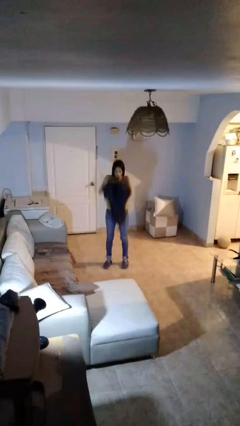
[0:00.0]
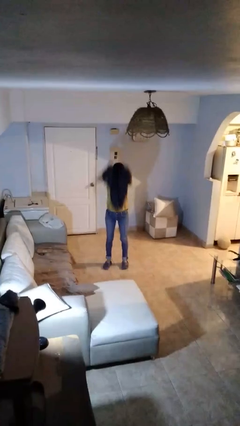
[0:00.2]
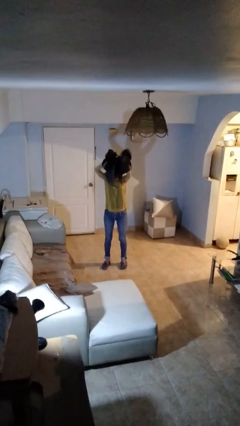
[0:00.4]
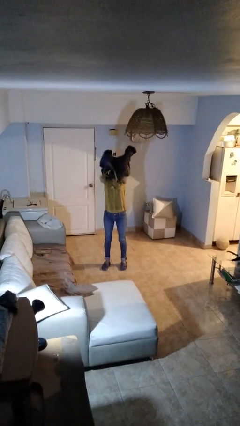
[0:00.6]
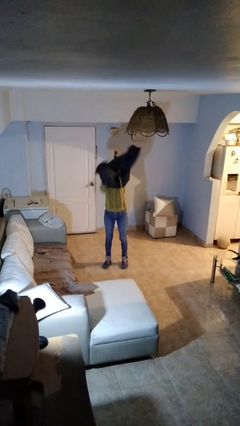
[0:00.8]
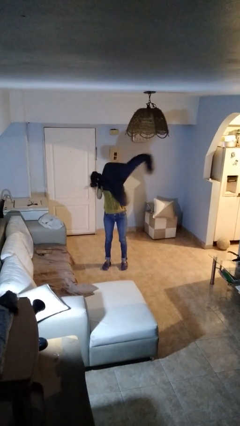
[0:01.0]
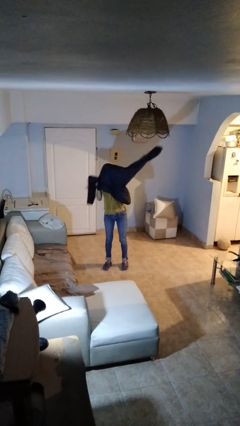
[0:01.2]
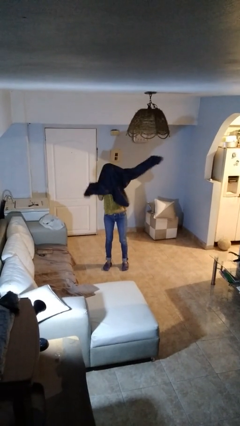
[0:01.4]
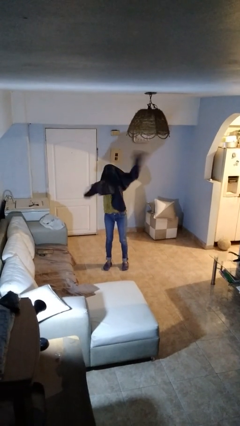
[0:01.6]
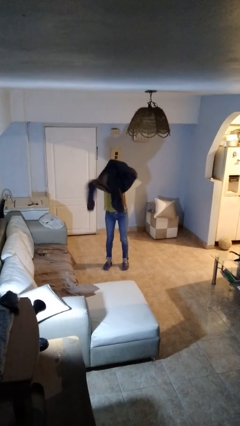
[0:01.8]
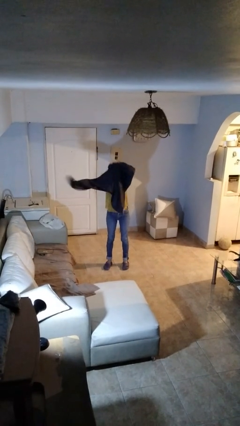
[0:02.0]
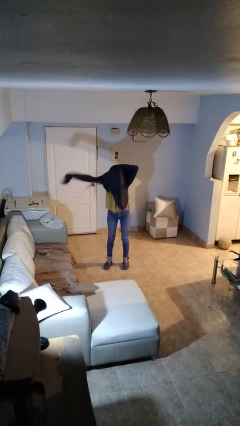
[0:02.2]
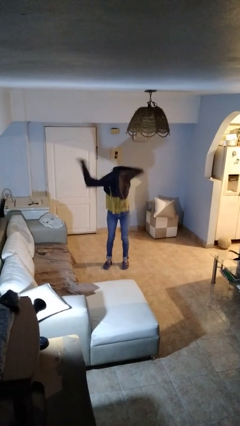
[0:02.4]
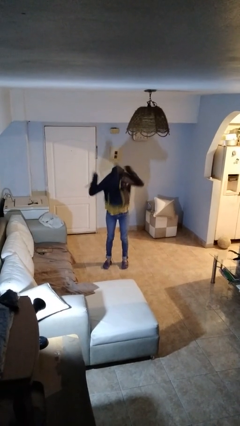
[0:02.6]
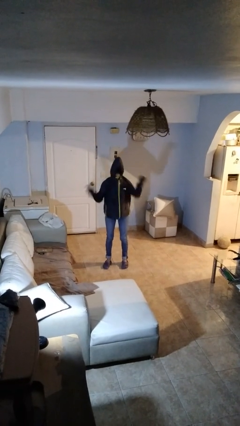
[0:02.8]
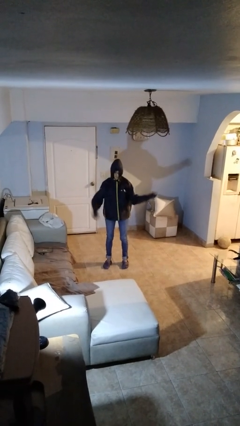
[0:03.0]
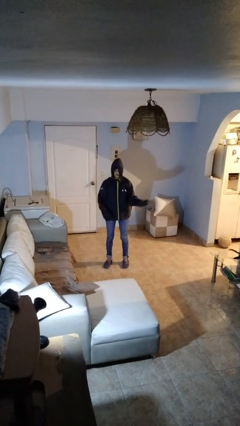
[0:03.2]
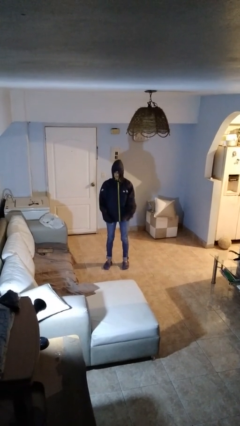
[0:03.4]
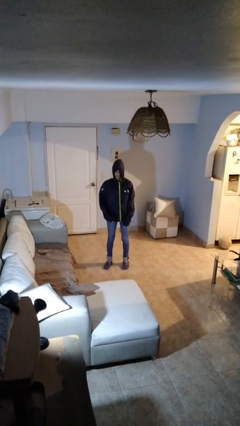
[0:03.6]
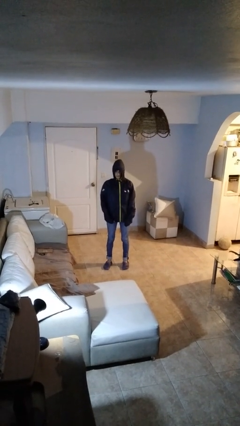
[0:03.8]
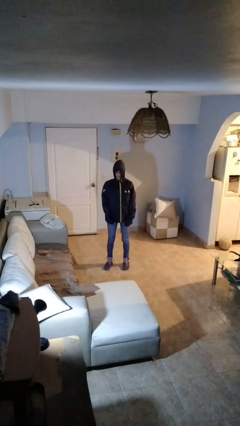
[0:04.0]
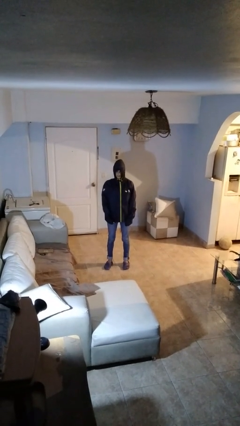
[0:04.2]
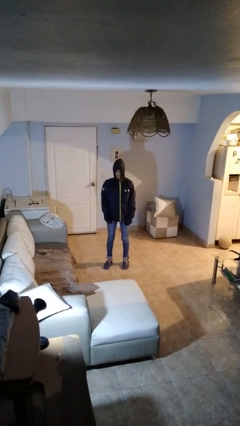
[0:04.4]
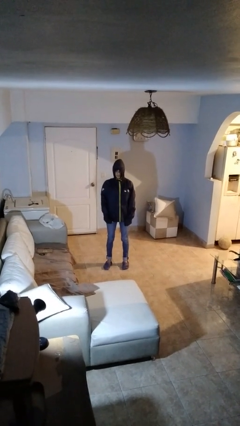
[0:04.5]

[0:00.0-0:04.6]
person puts on hoodie

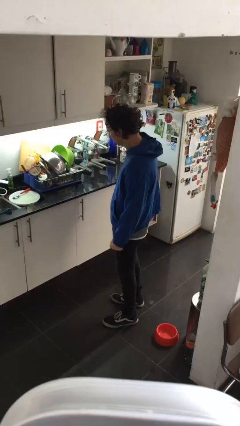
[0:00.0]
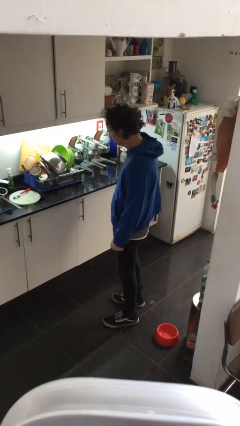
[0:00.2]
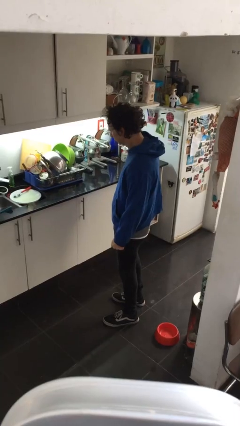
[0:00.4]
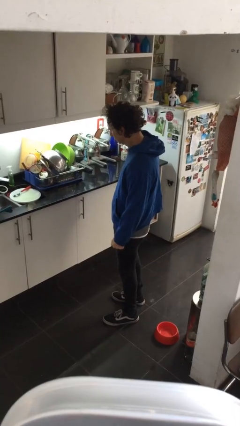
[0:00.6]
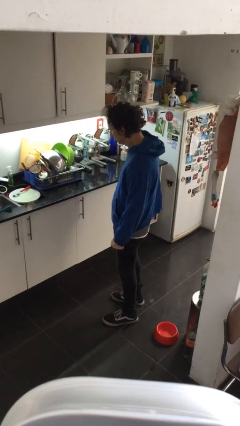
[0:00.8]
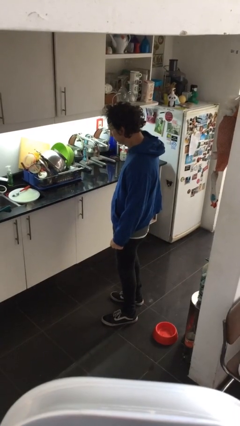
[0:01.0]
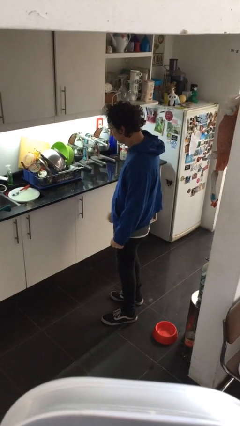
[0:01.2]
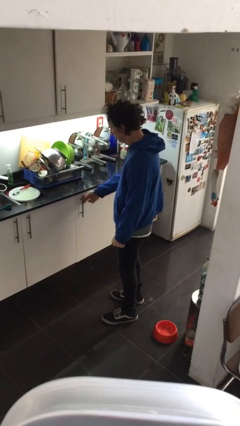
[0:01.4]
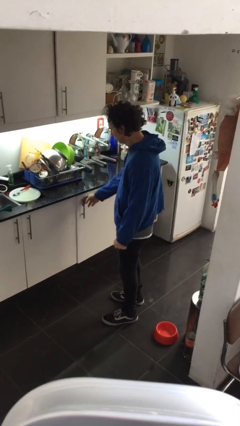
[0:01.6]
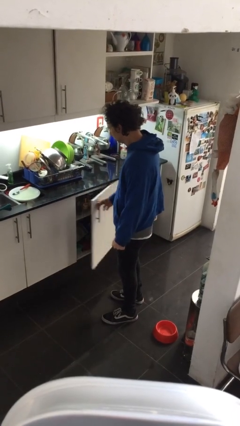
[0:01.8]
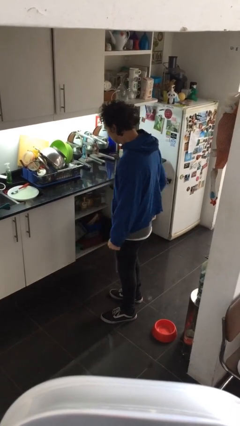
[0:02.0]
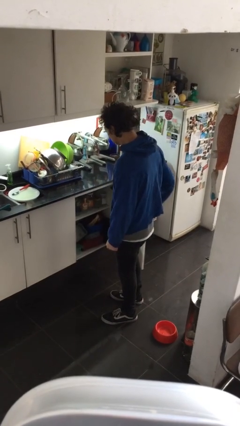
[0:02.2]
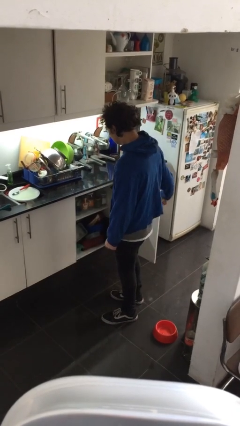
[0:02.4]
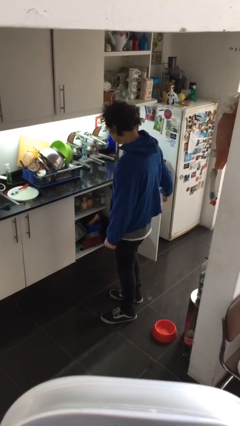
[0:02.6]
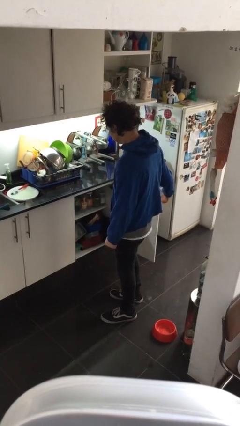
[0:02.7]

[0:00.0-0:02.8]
person opens cabinet

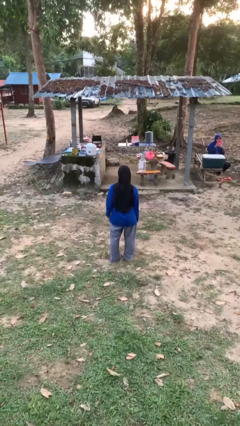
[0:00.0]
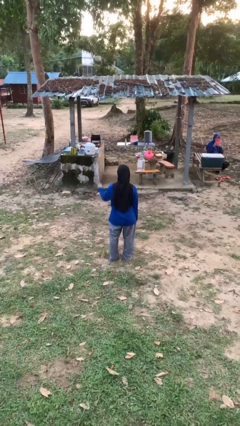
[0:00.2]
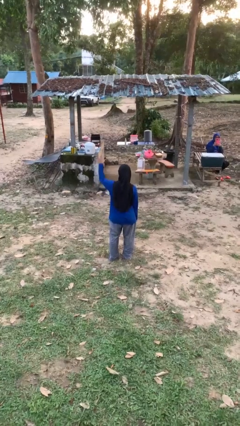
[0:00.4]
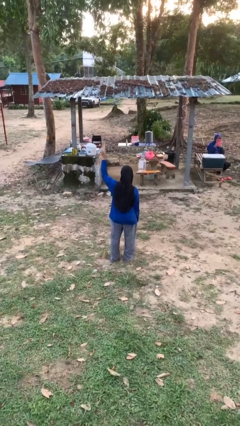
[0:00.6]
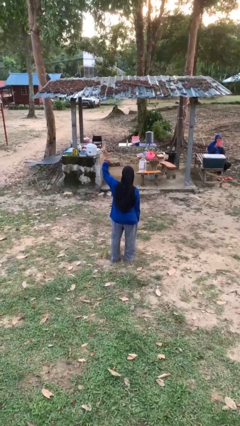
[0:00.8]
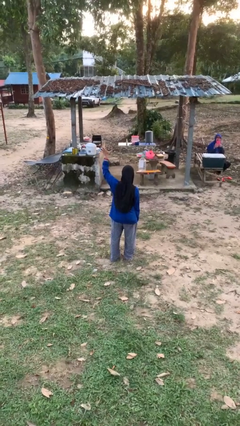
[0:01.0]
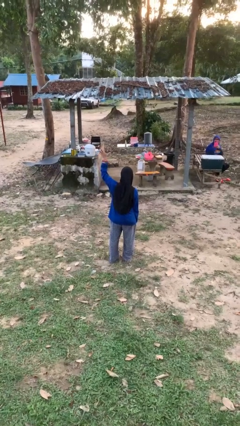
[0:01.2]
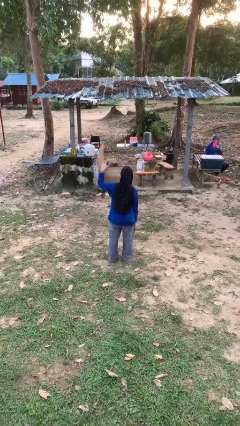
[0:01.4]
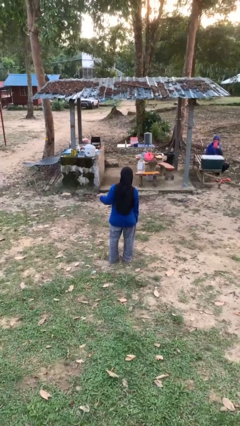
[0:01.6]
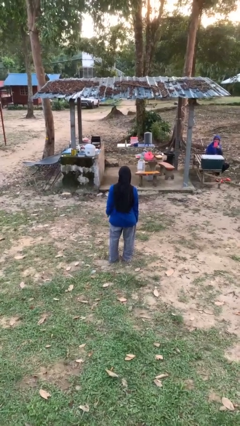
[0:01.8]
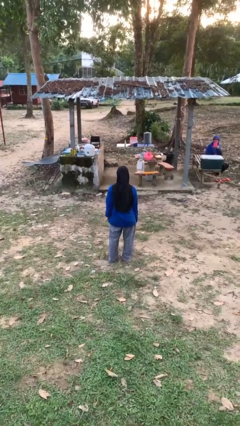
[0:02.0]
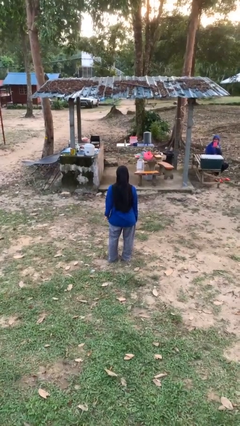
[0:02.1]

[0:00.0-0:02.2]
person gestures number five

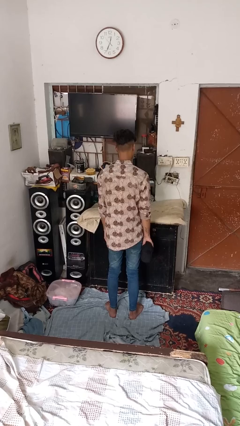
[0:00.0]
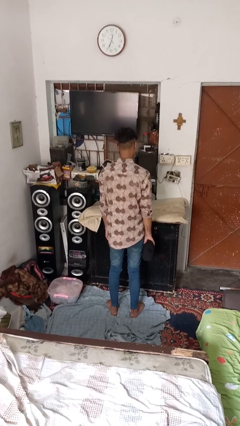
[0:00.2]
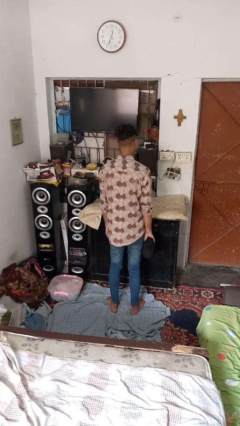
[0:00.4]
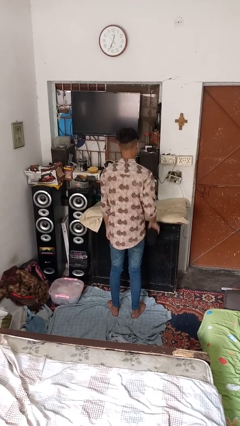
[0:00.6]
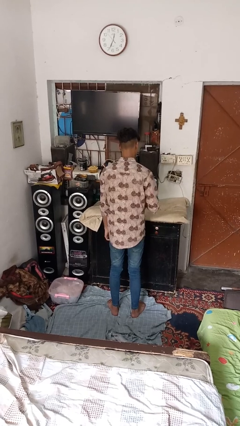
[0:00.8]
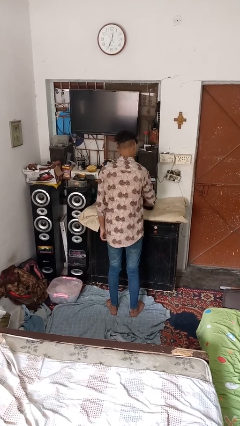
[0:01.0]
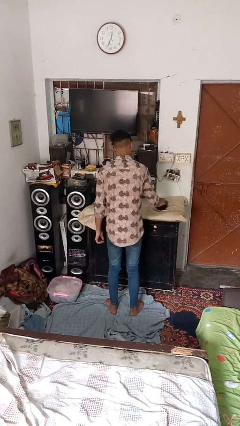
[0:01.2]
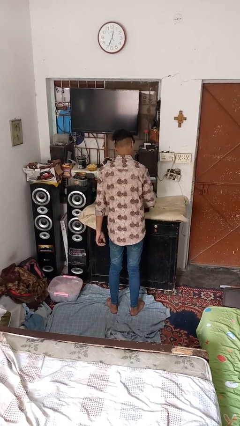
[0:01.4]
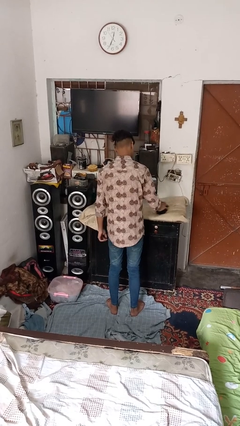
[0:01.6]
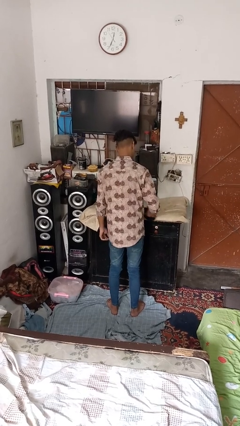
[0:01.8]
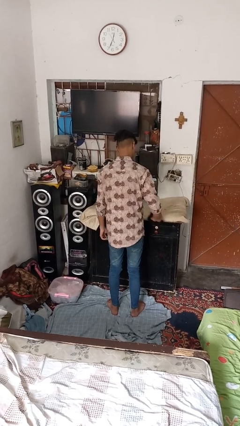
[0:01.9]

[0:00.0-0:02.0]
person cleans table with rag

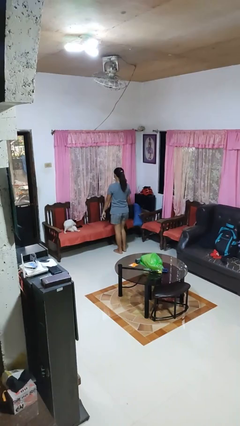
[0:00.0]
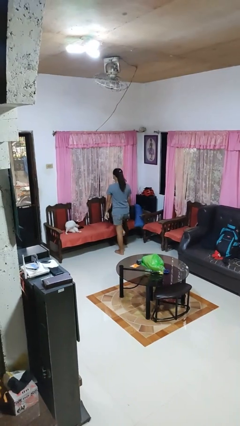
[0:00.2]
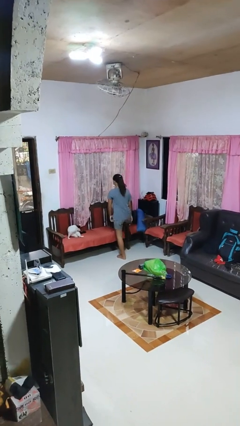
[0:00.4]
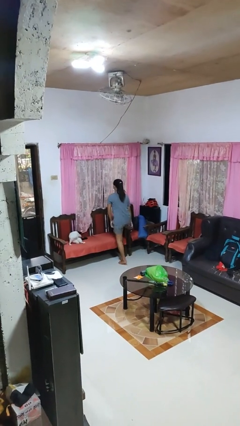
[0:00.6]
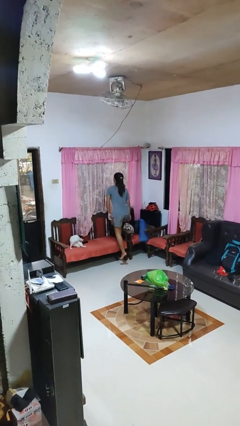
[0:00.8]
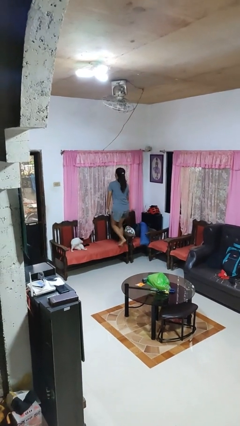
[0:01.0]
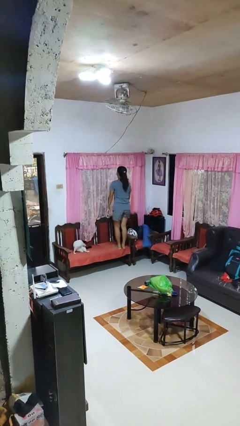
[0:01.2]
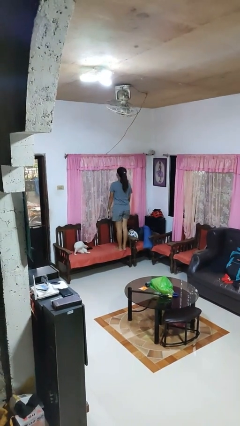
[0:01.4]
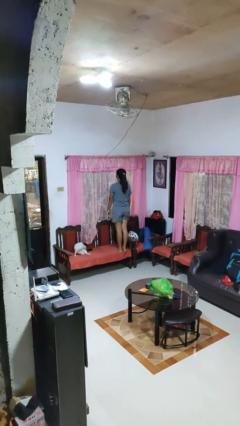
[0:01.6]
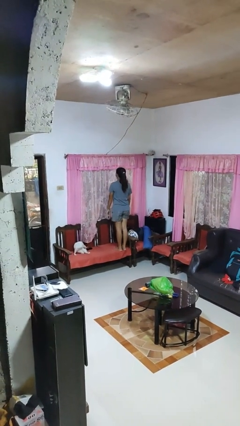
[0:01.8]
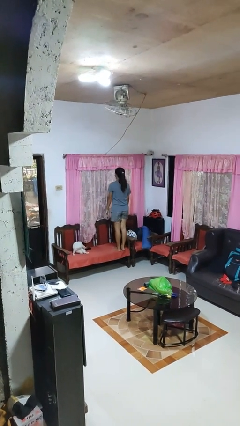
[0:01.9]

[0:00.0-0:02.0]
person climbs on chair

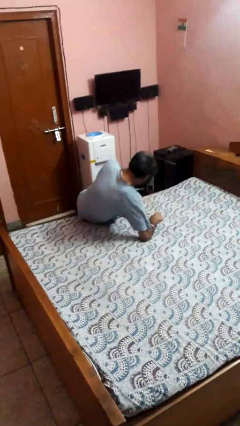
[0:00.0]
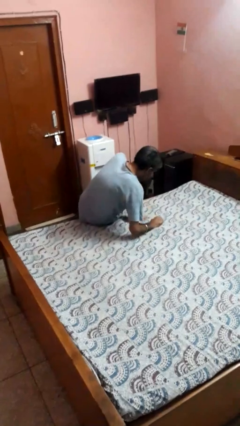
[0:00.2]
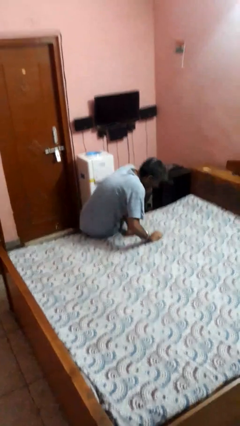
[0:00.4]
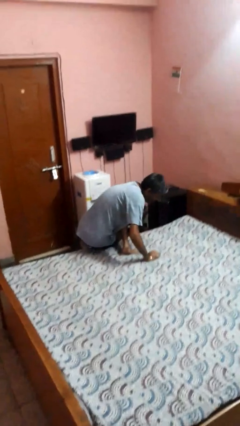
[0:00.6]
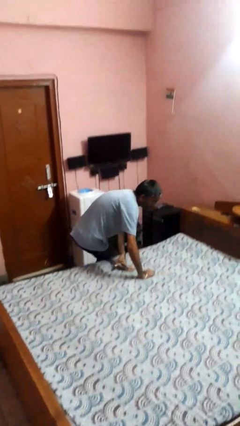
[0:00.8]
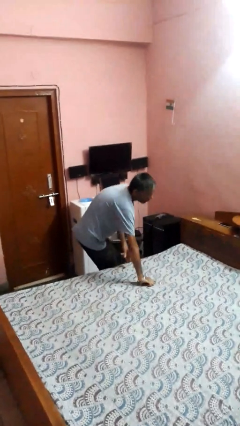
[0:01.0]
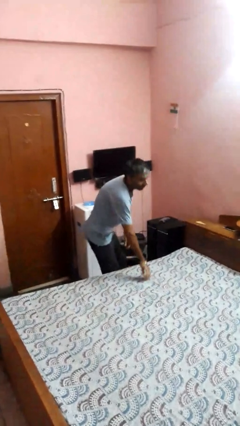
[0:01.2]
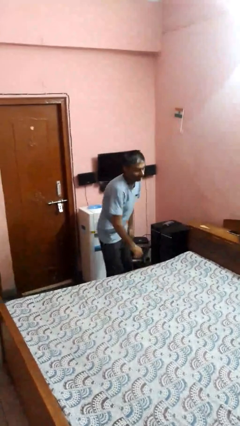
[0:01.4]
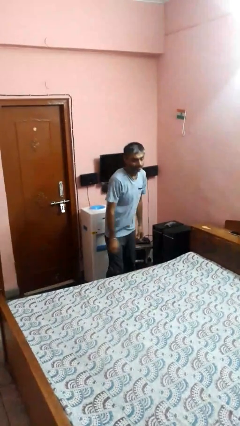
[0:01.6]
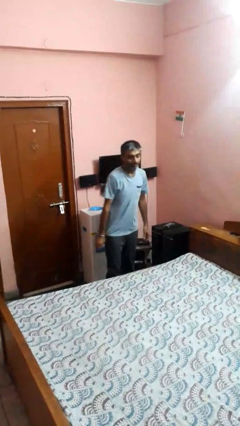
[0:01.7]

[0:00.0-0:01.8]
person stands up

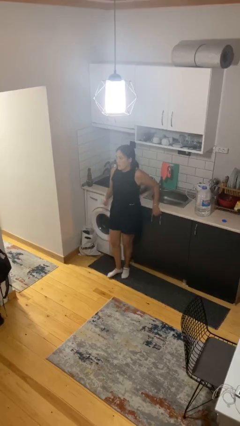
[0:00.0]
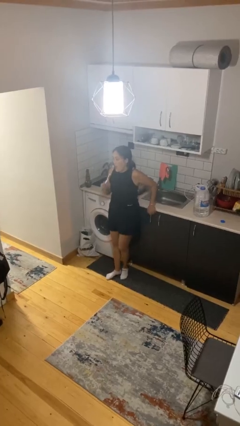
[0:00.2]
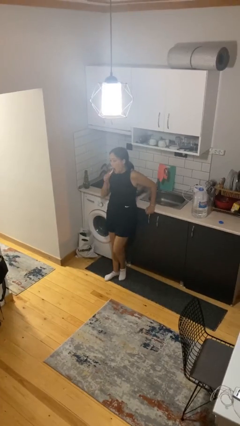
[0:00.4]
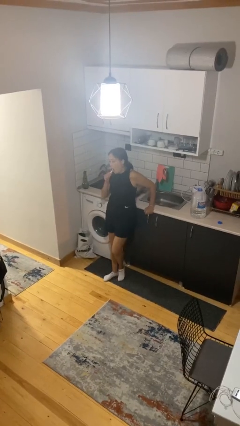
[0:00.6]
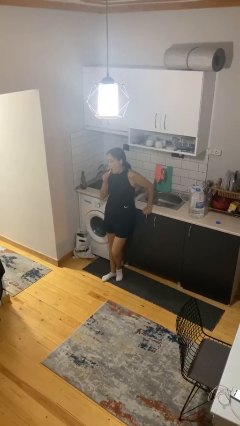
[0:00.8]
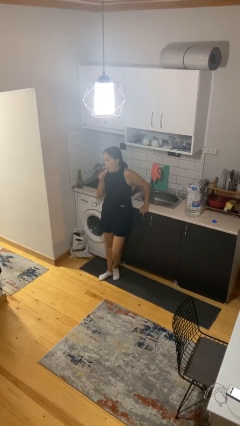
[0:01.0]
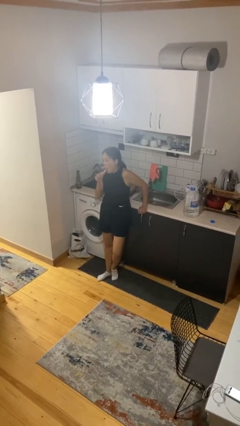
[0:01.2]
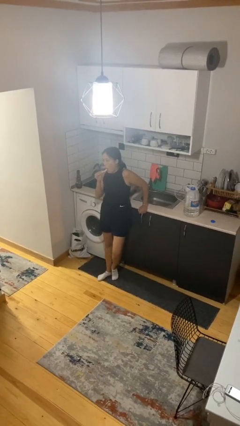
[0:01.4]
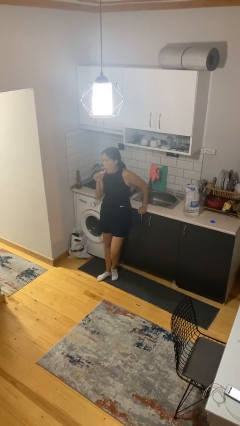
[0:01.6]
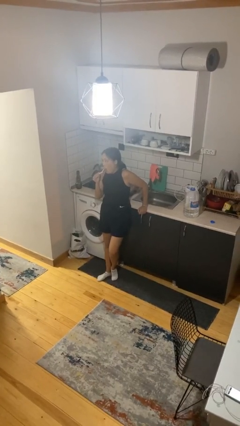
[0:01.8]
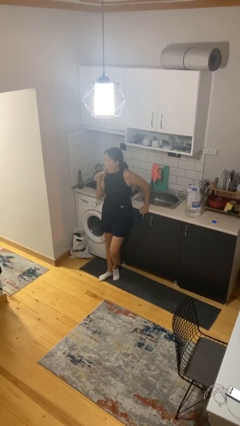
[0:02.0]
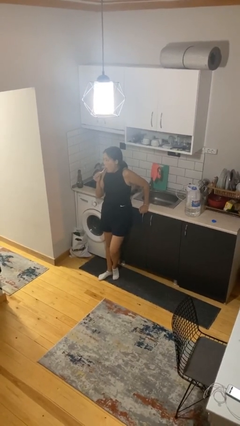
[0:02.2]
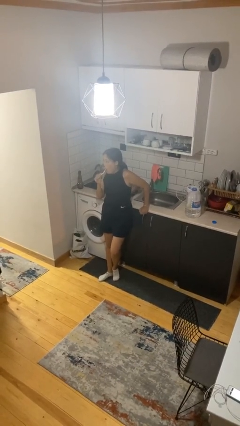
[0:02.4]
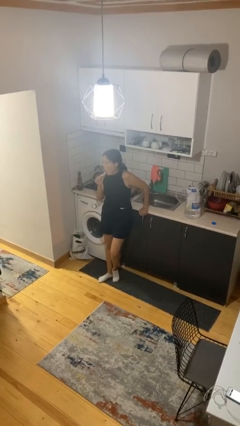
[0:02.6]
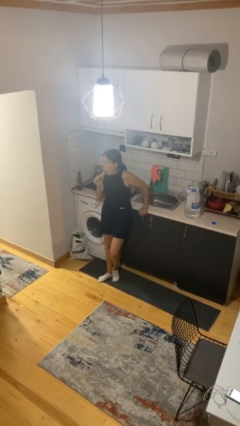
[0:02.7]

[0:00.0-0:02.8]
person brushes teeth
